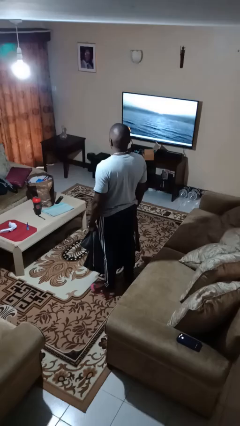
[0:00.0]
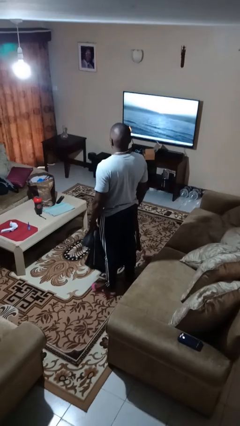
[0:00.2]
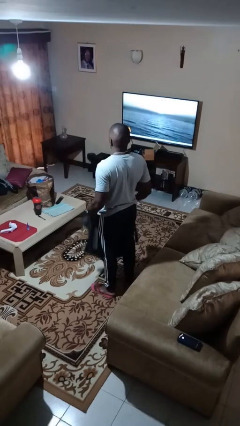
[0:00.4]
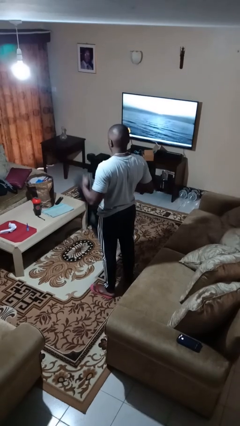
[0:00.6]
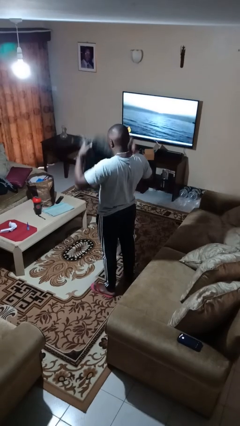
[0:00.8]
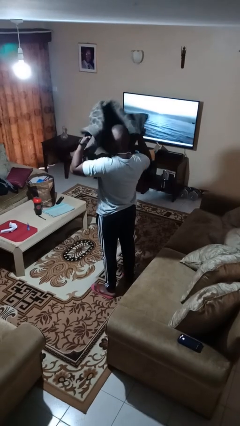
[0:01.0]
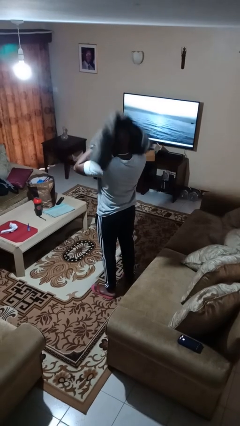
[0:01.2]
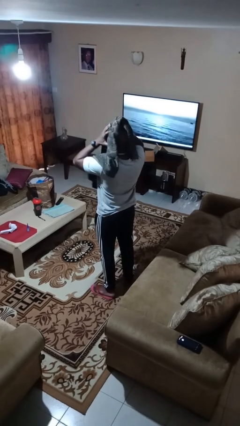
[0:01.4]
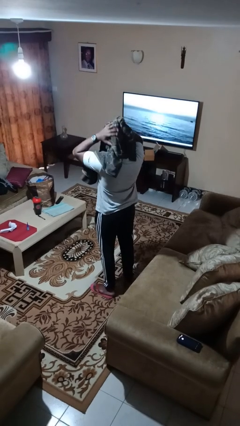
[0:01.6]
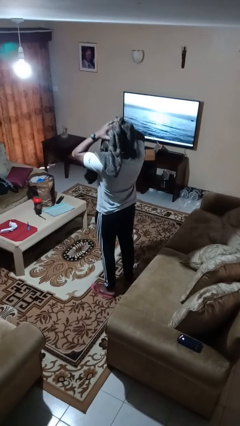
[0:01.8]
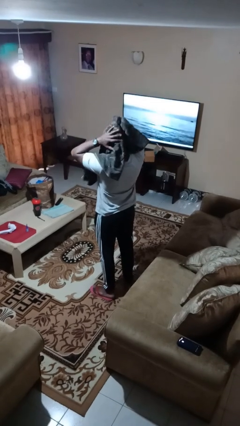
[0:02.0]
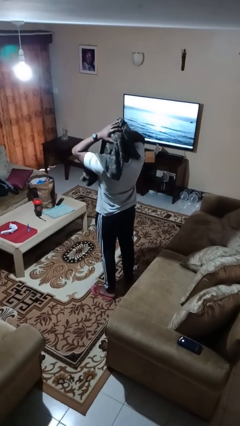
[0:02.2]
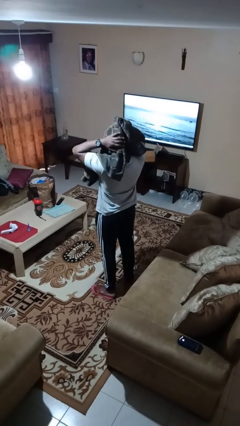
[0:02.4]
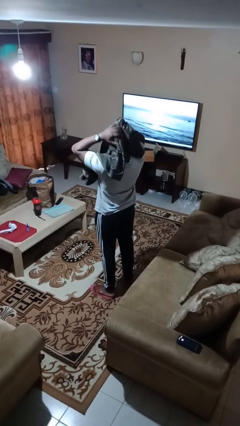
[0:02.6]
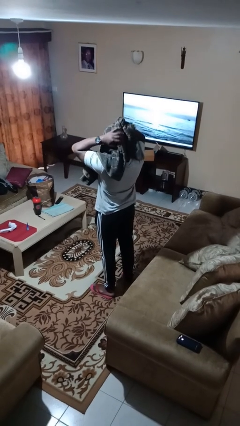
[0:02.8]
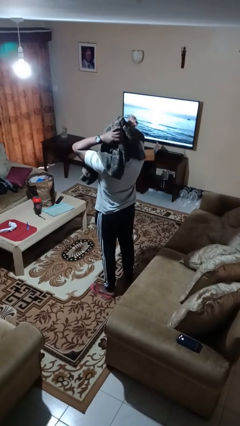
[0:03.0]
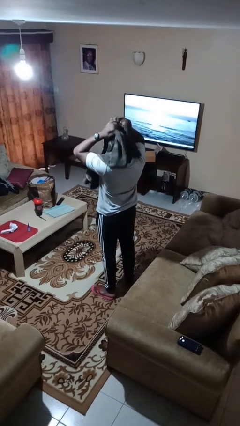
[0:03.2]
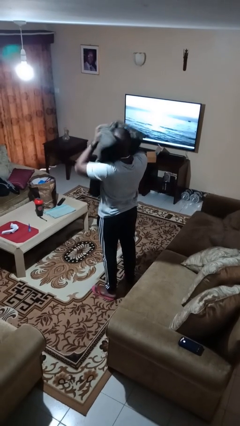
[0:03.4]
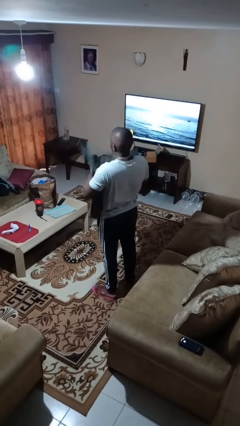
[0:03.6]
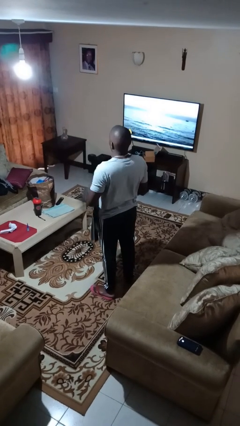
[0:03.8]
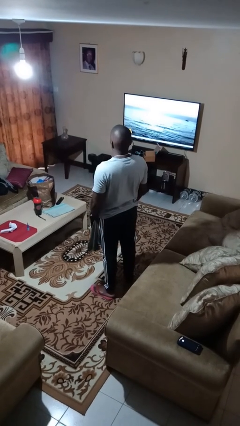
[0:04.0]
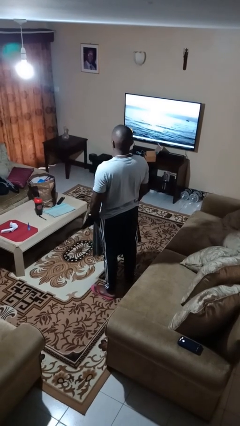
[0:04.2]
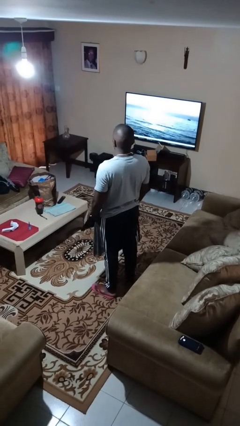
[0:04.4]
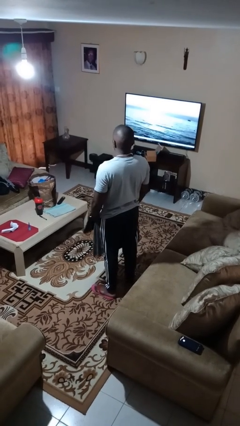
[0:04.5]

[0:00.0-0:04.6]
person dries hair with towel

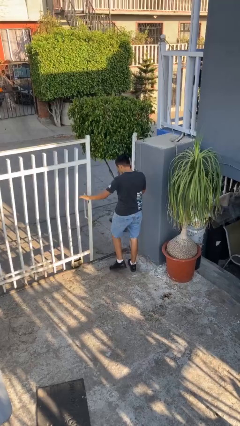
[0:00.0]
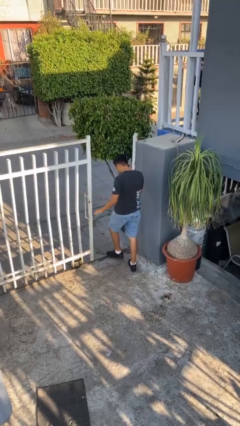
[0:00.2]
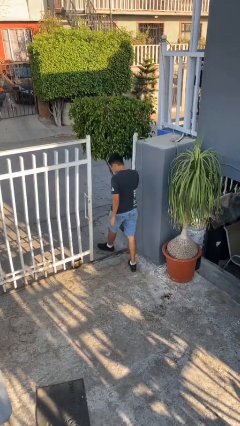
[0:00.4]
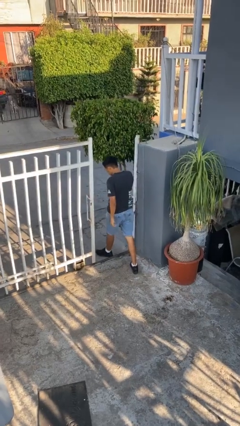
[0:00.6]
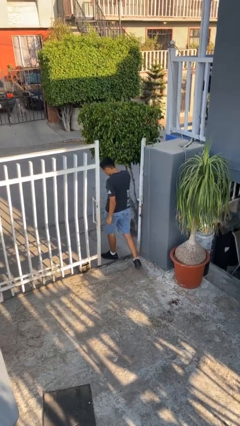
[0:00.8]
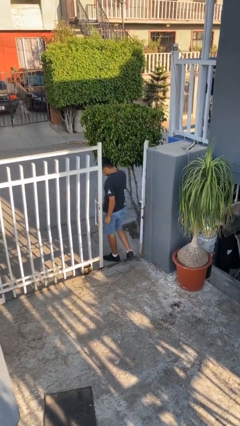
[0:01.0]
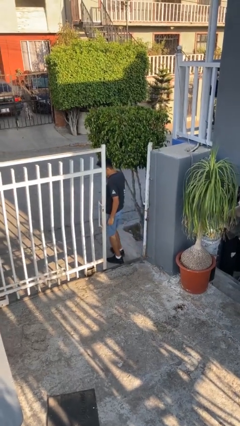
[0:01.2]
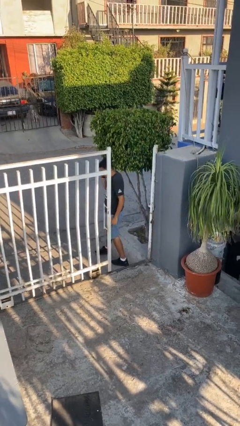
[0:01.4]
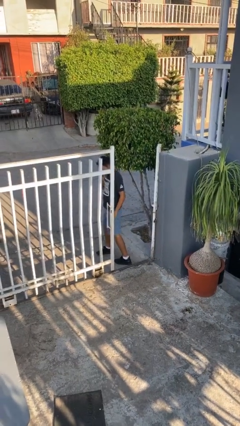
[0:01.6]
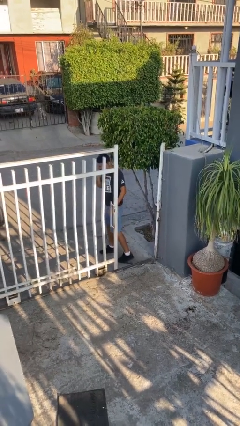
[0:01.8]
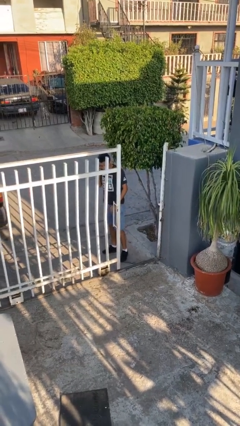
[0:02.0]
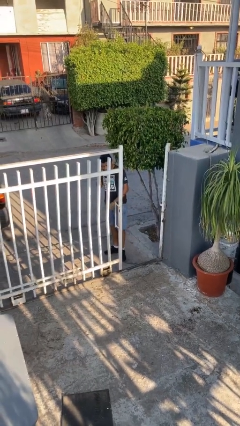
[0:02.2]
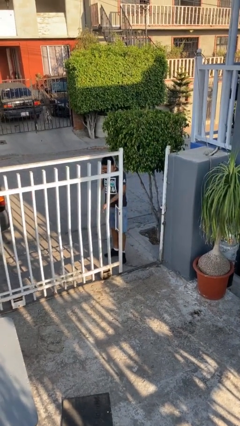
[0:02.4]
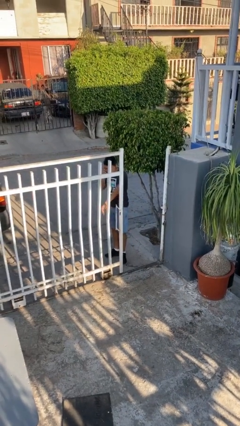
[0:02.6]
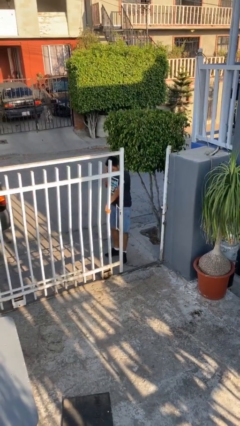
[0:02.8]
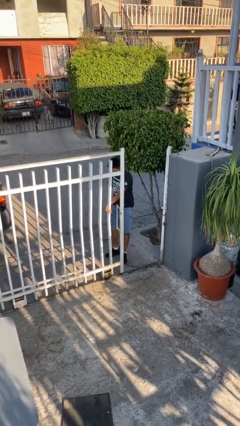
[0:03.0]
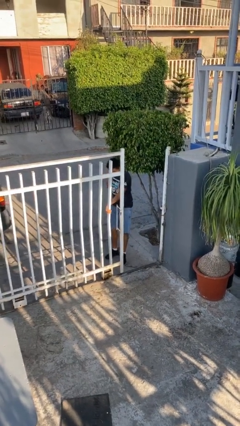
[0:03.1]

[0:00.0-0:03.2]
person exits scene through structure

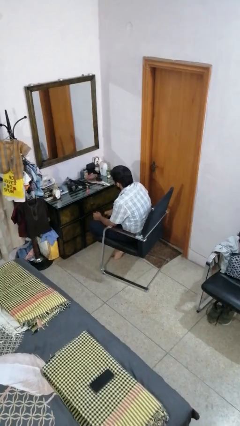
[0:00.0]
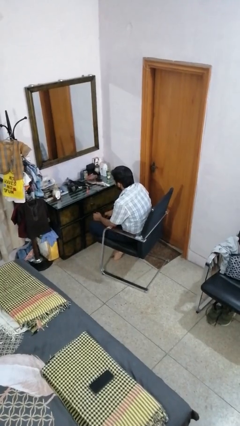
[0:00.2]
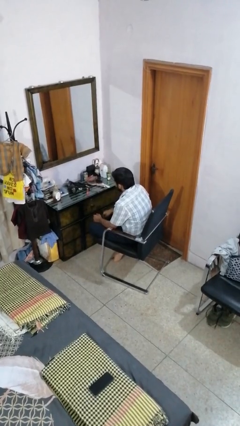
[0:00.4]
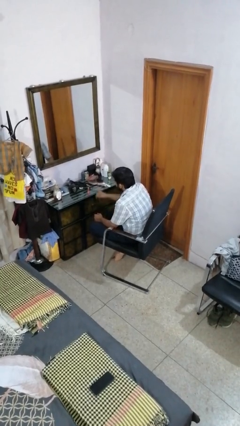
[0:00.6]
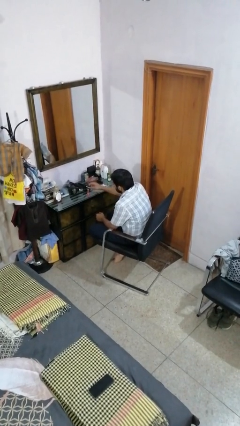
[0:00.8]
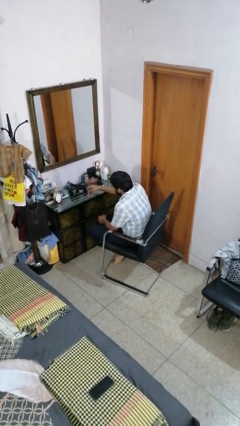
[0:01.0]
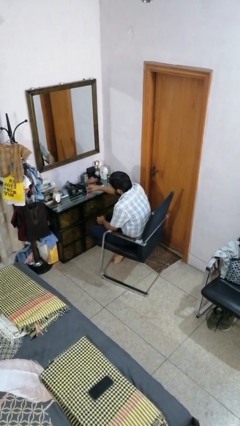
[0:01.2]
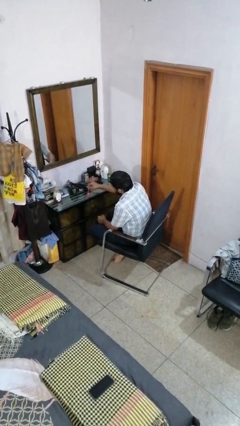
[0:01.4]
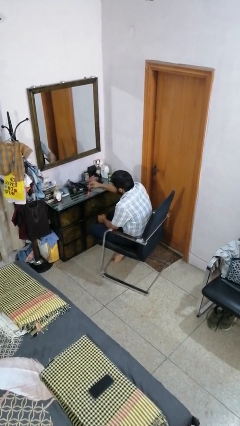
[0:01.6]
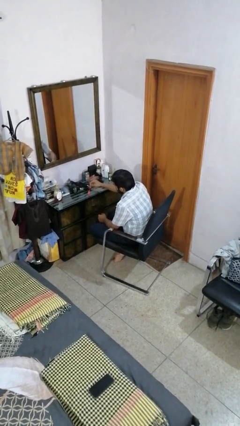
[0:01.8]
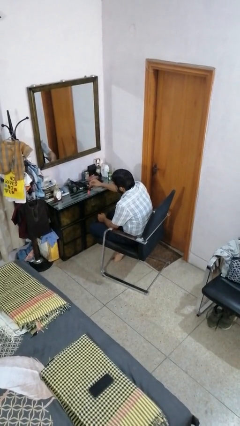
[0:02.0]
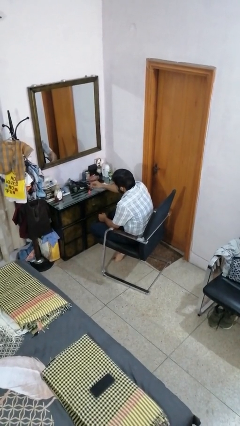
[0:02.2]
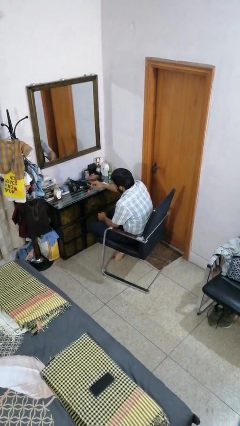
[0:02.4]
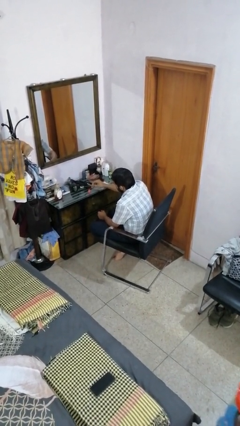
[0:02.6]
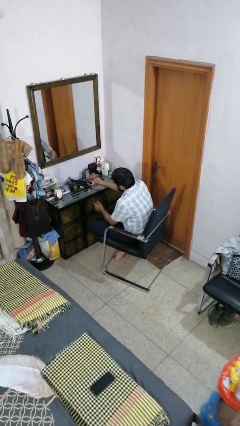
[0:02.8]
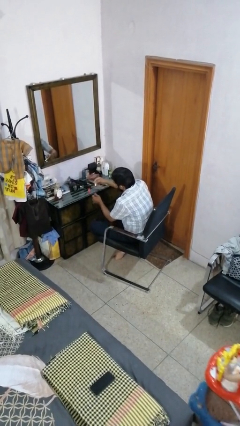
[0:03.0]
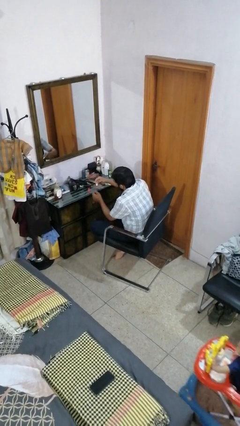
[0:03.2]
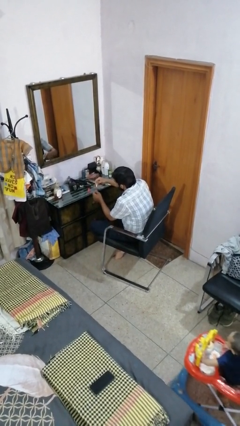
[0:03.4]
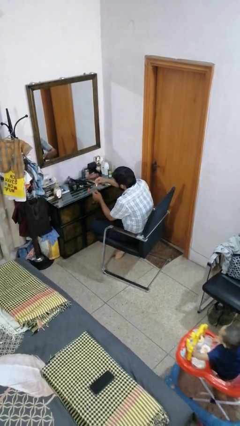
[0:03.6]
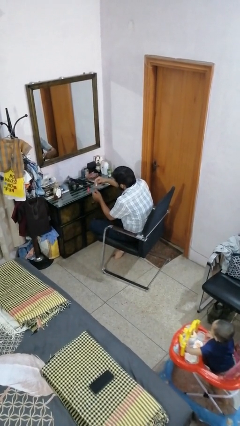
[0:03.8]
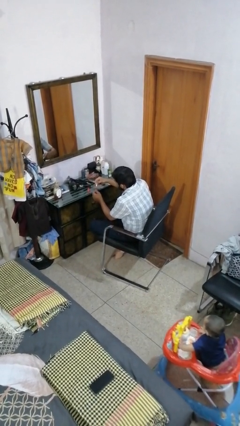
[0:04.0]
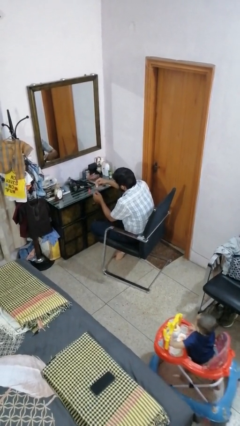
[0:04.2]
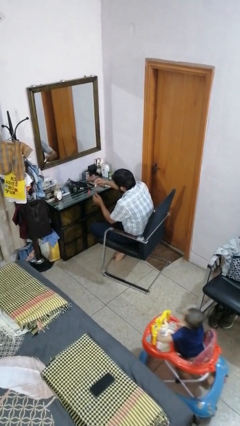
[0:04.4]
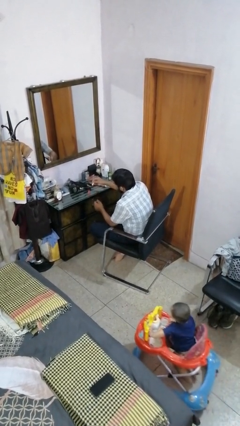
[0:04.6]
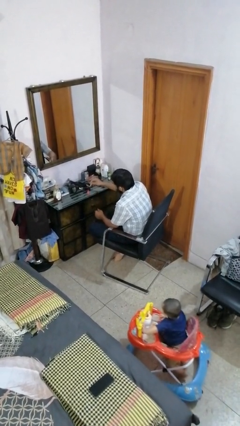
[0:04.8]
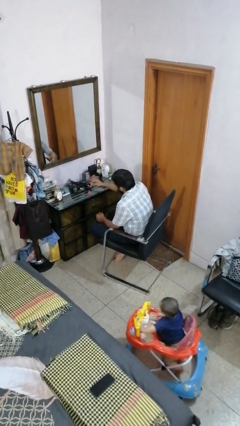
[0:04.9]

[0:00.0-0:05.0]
person paints fingernails

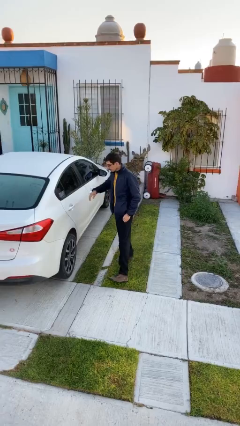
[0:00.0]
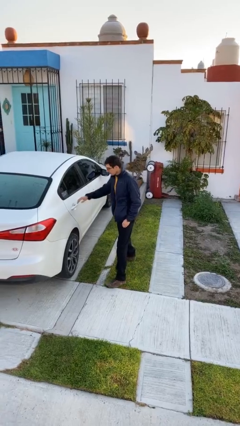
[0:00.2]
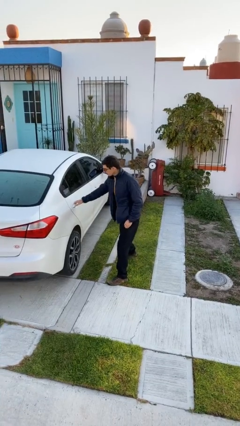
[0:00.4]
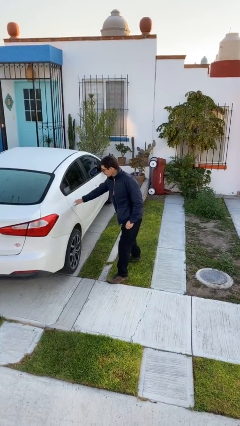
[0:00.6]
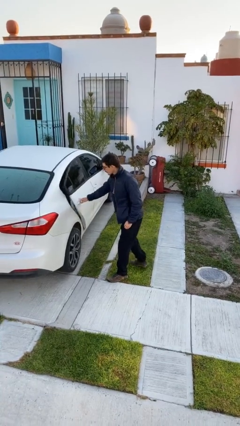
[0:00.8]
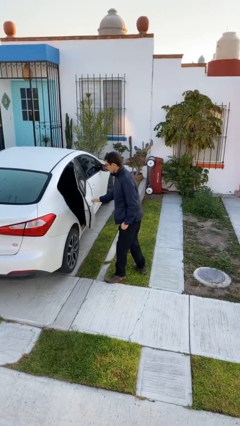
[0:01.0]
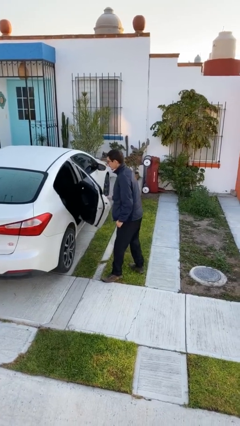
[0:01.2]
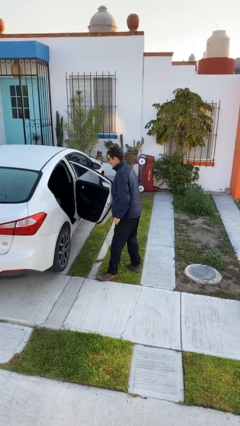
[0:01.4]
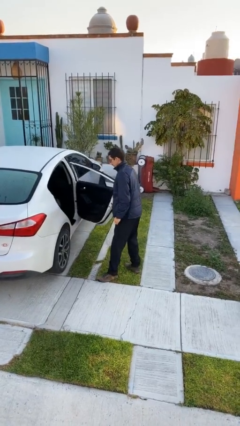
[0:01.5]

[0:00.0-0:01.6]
person opens car door

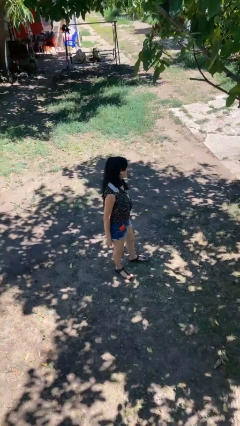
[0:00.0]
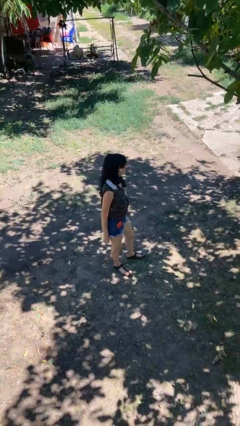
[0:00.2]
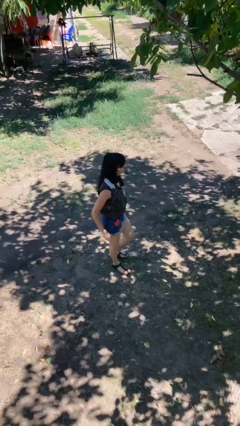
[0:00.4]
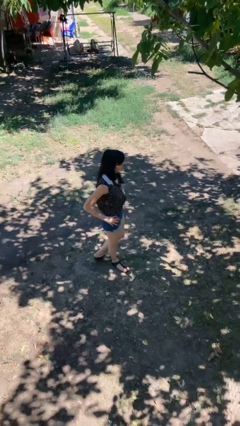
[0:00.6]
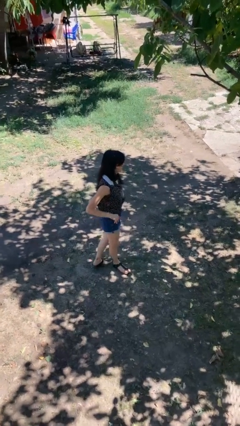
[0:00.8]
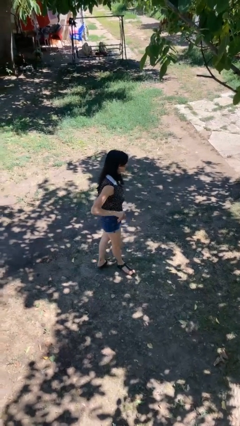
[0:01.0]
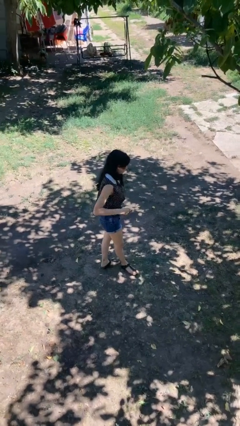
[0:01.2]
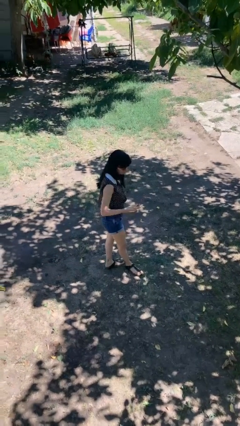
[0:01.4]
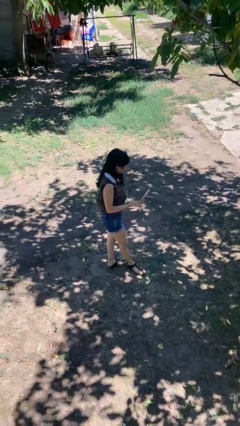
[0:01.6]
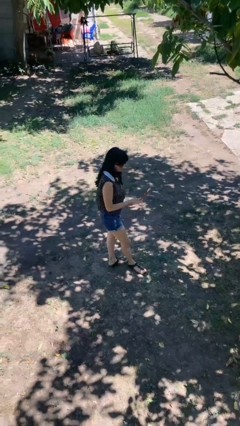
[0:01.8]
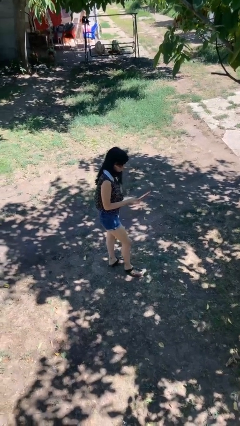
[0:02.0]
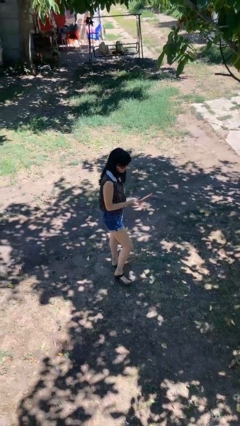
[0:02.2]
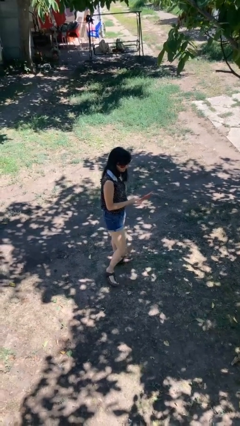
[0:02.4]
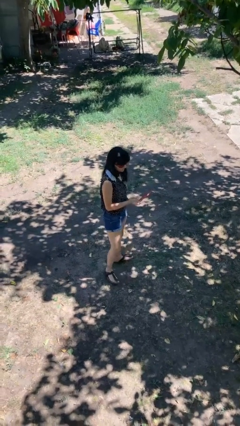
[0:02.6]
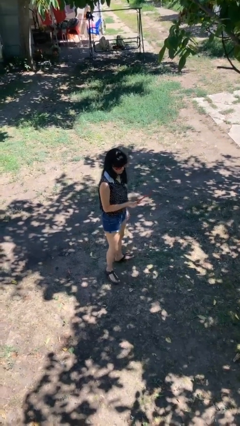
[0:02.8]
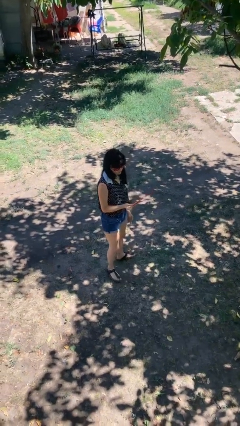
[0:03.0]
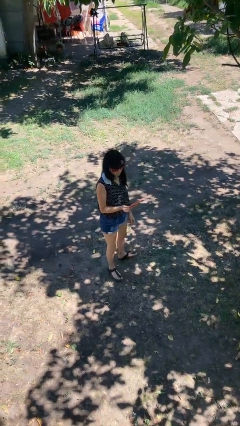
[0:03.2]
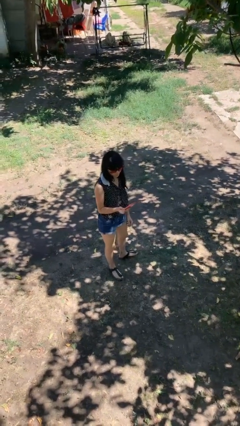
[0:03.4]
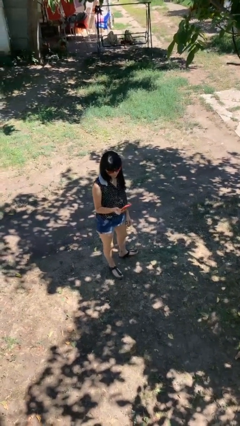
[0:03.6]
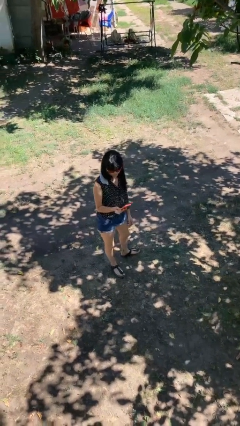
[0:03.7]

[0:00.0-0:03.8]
person takes phone from pocket
